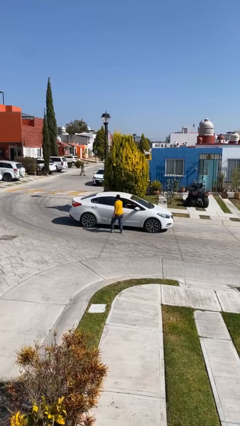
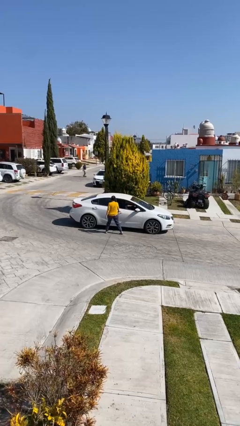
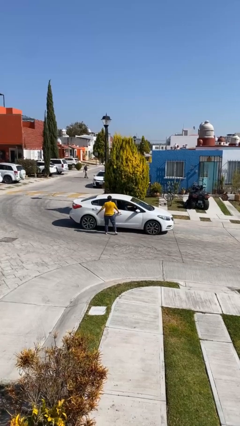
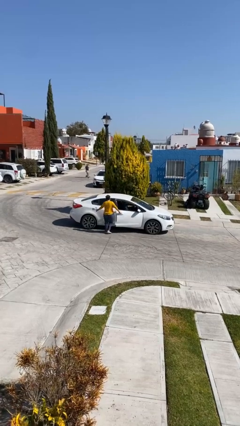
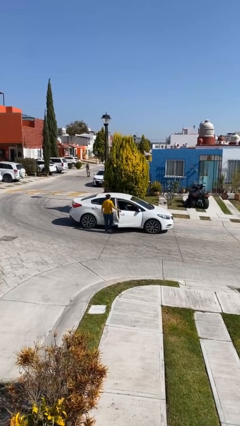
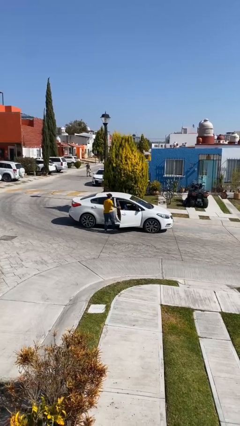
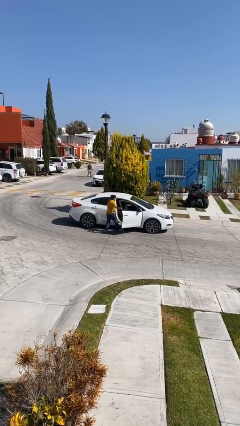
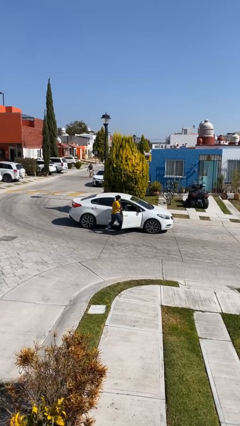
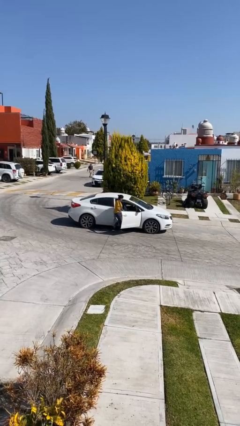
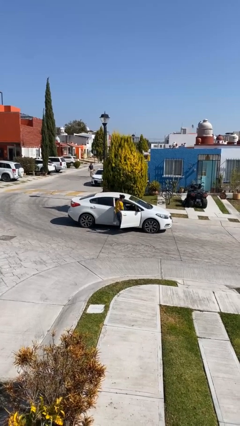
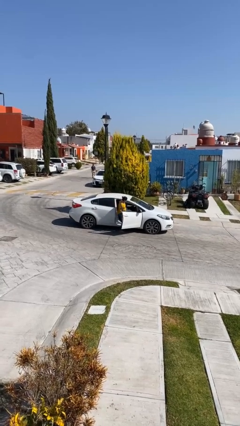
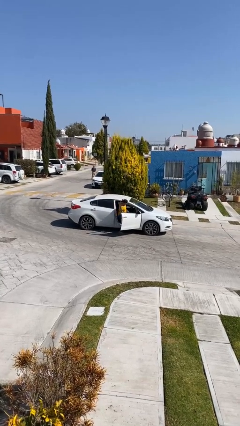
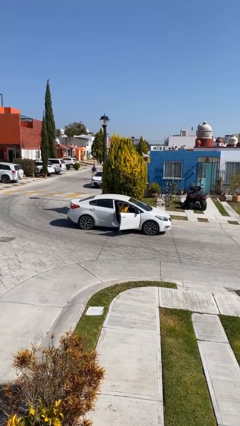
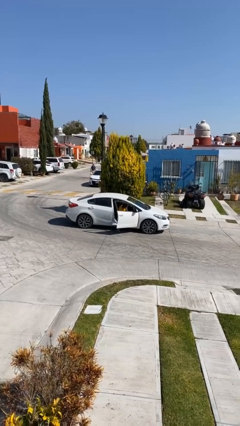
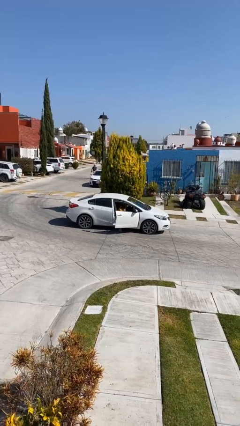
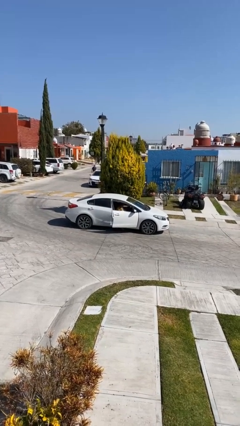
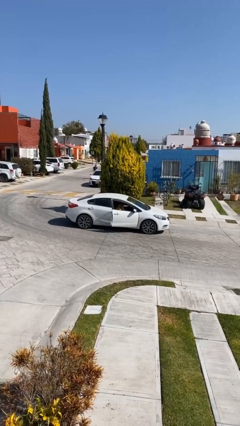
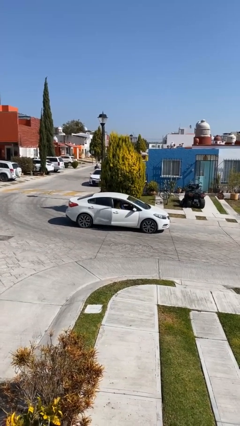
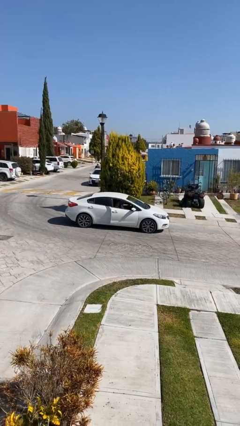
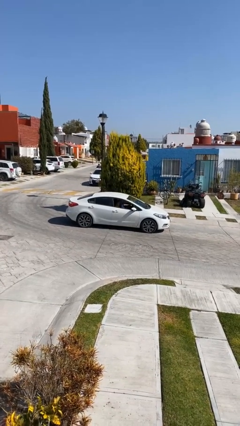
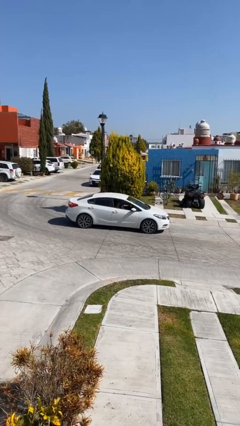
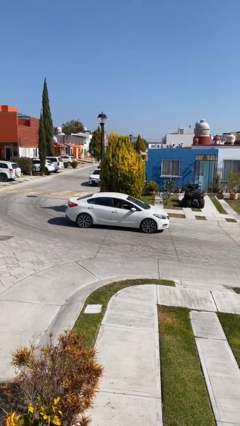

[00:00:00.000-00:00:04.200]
car picks up person

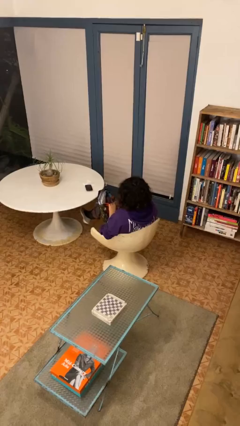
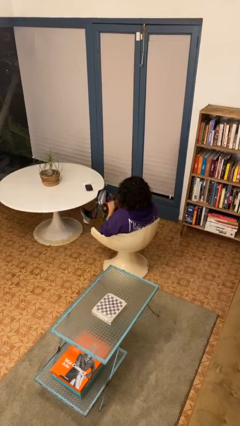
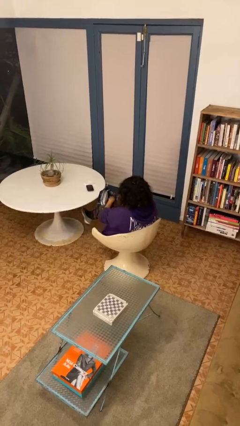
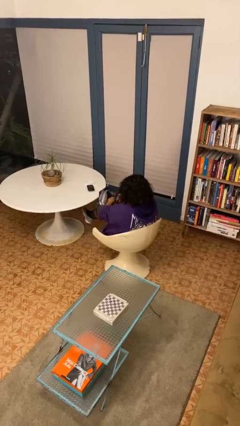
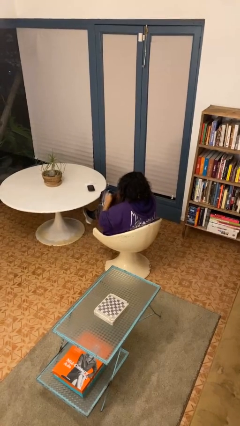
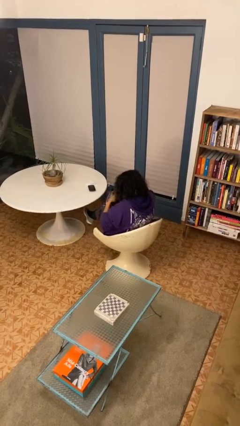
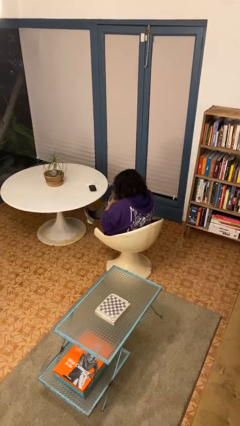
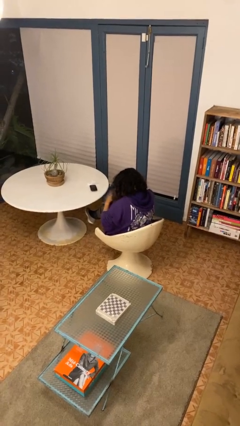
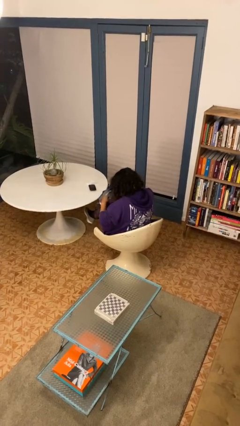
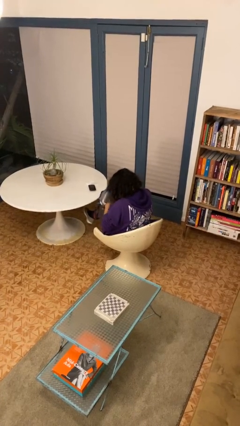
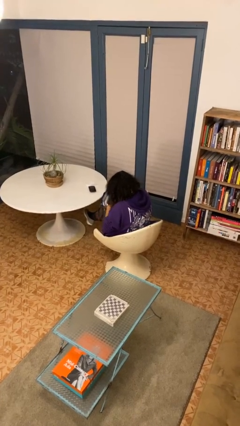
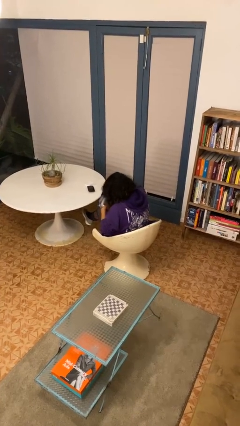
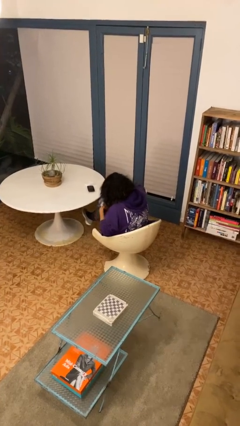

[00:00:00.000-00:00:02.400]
person searches in bag

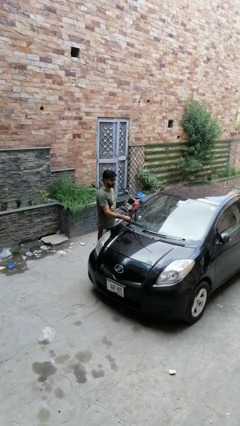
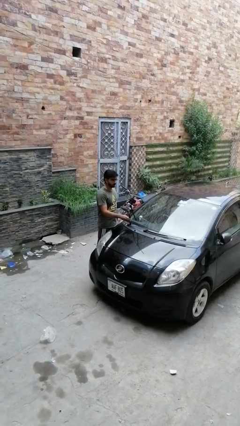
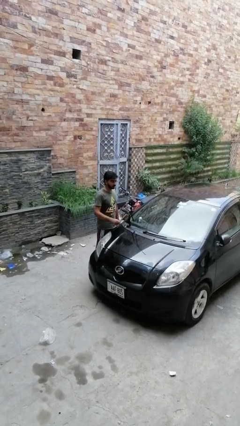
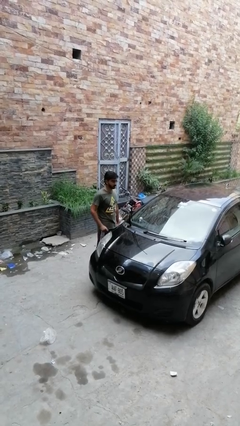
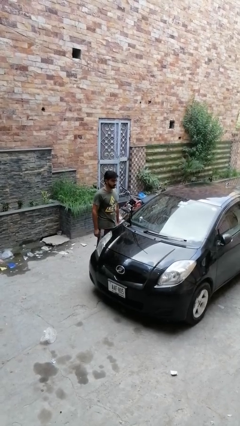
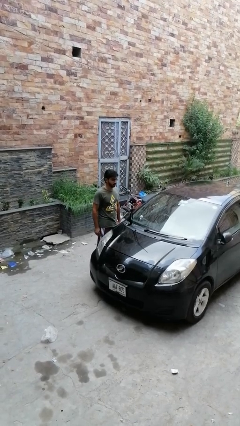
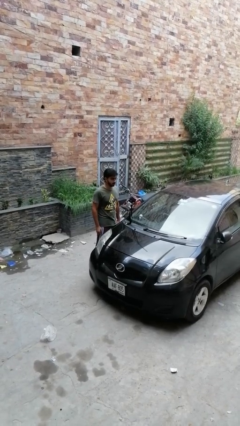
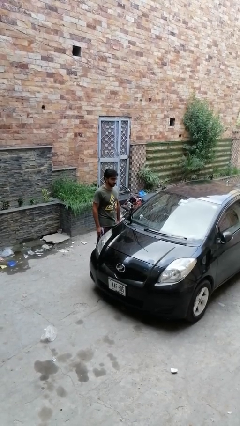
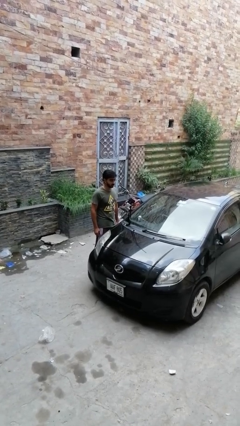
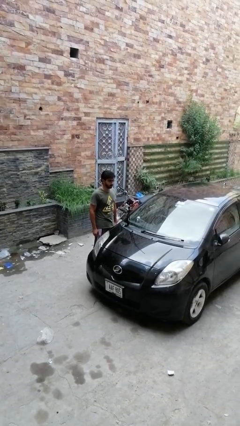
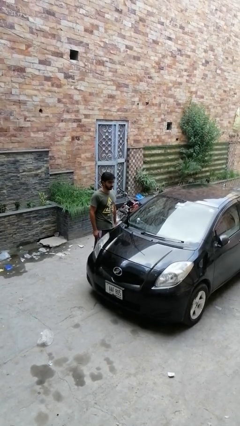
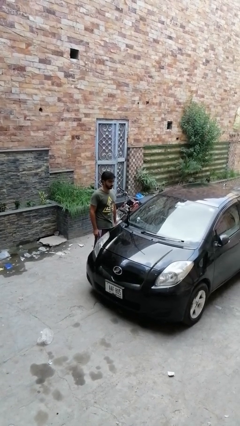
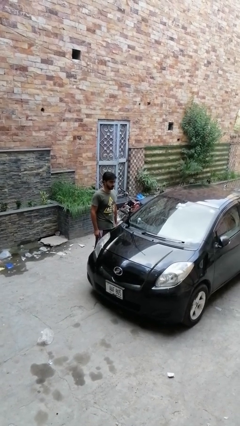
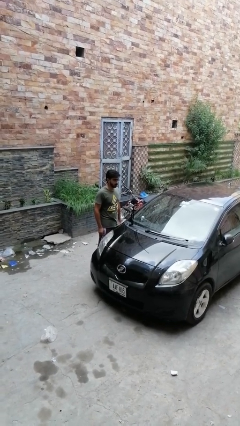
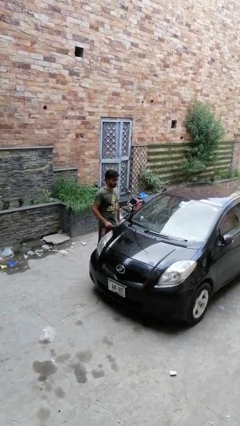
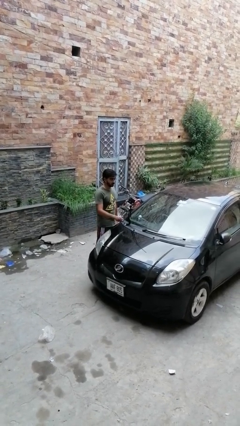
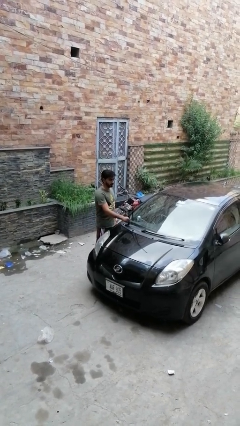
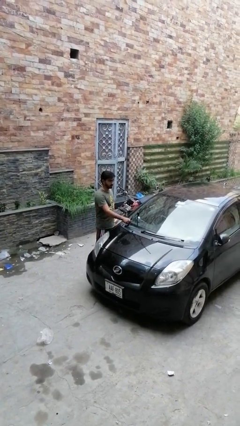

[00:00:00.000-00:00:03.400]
person flips up car wipers

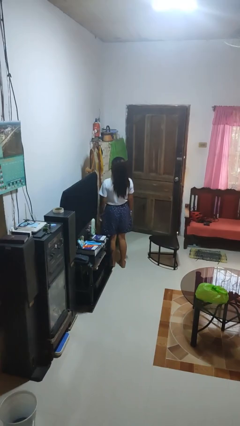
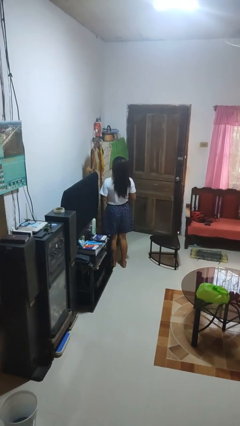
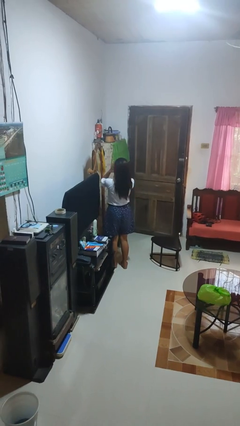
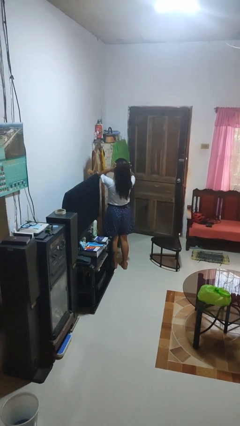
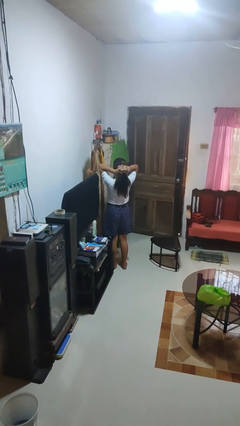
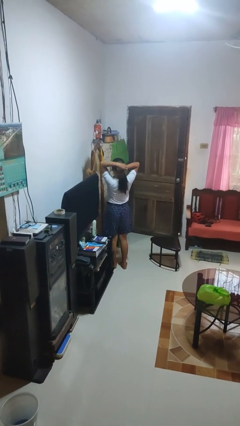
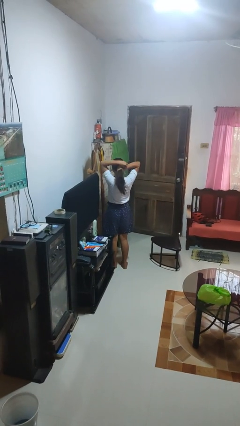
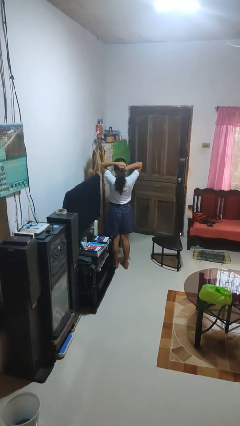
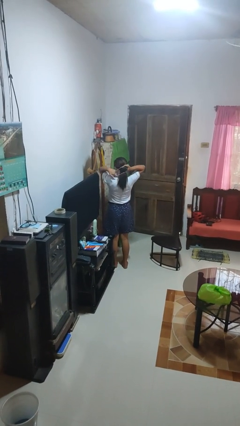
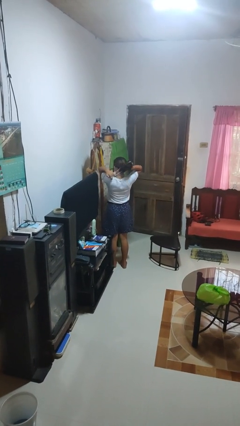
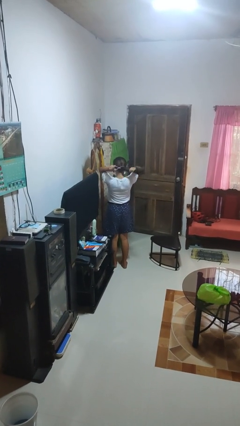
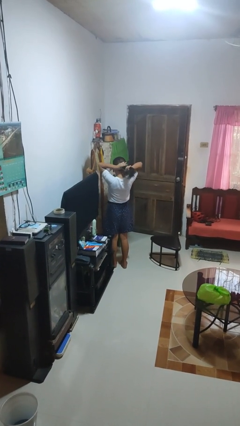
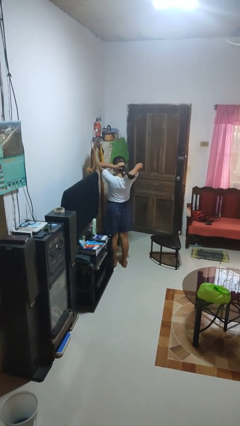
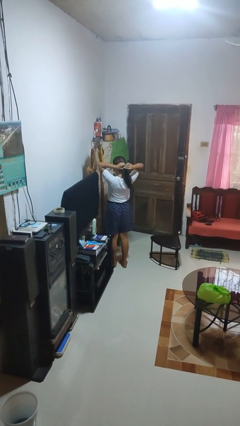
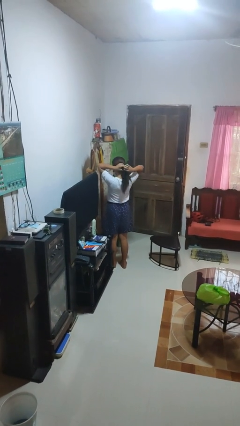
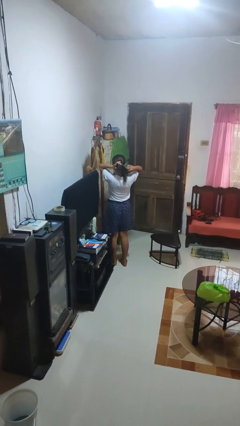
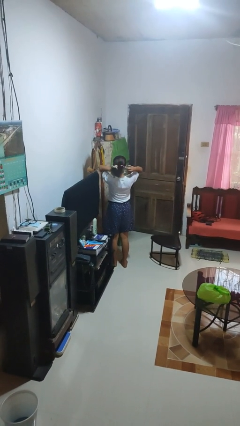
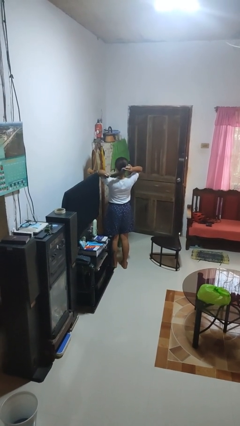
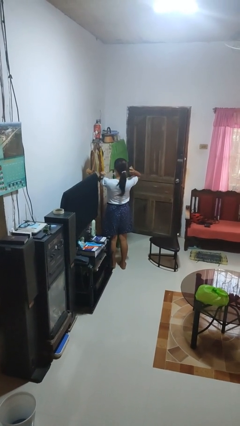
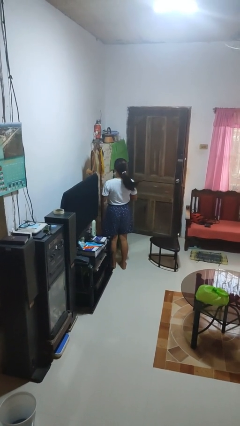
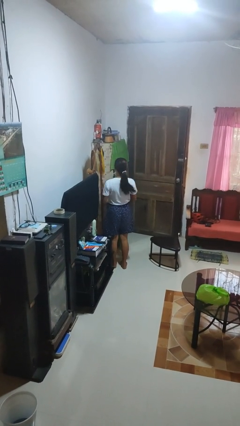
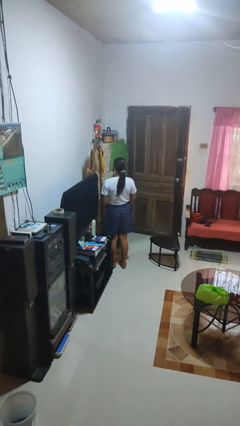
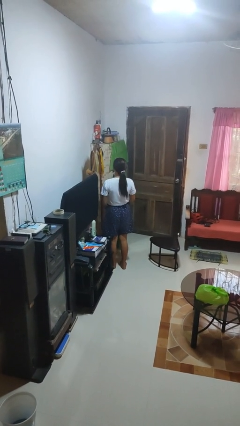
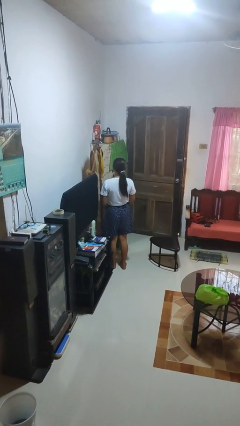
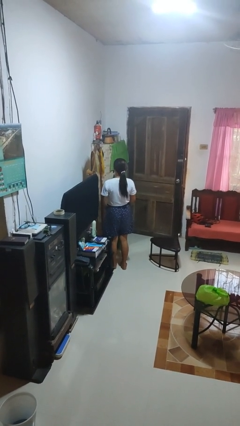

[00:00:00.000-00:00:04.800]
person puts hair in ponytail

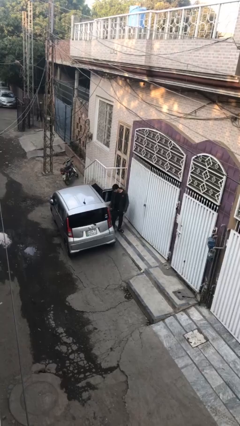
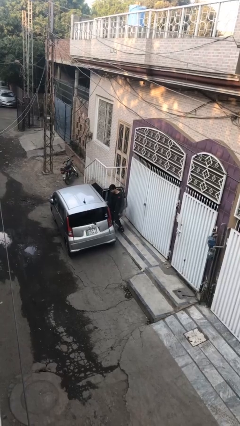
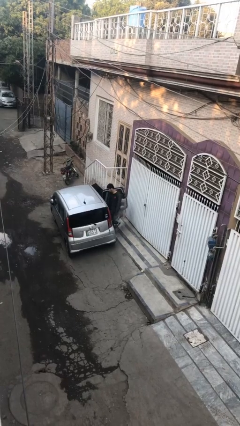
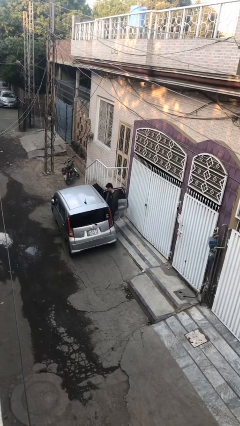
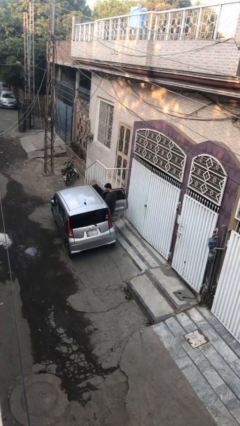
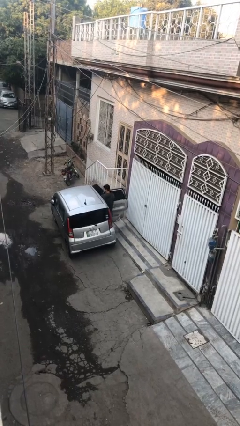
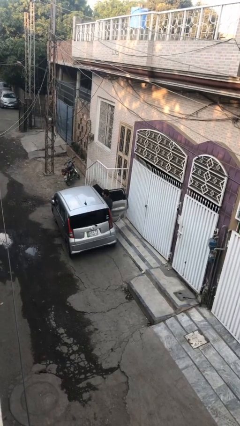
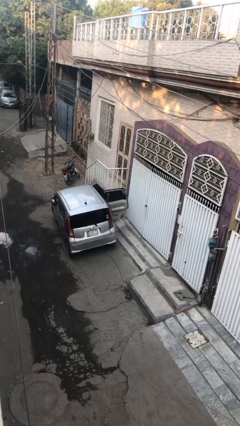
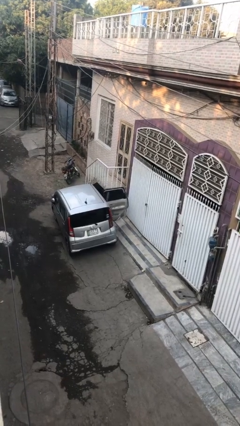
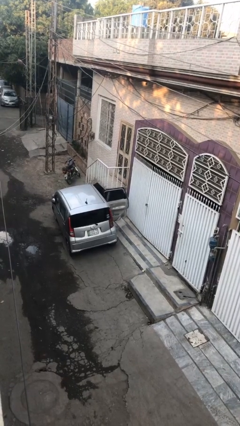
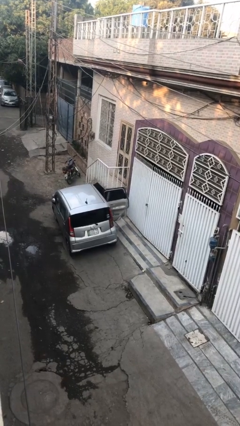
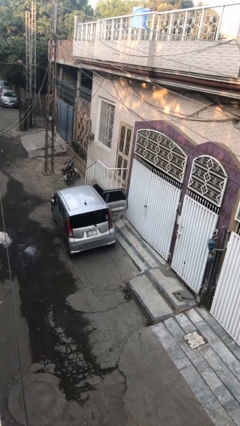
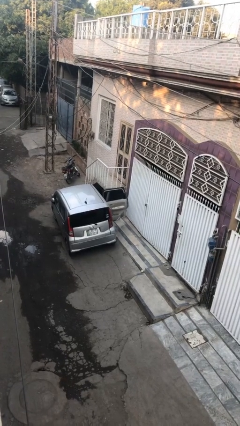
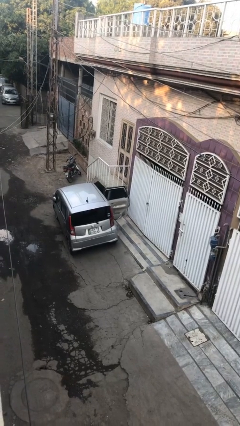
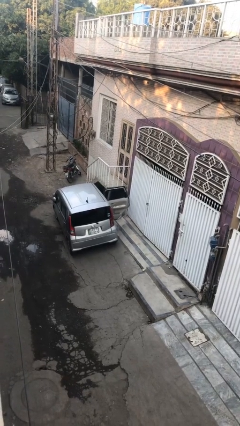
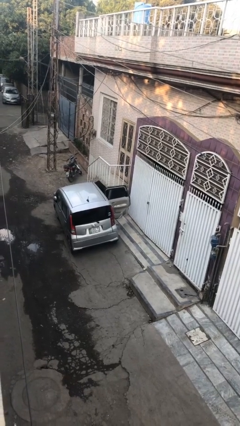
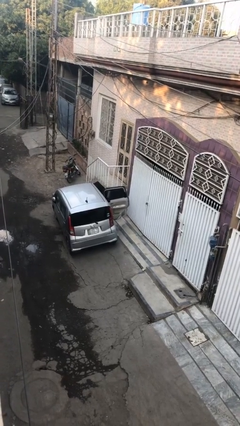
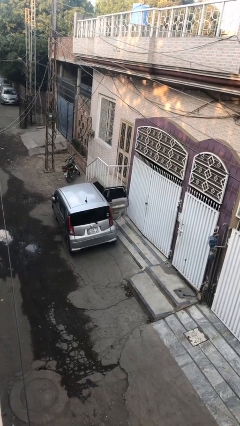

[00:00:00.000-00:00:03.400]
person enters car
